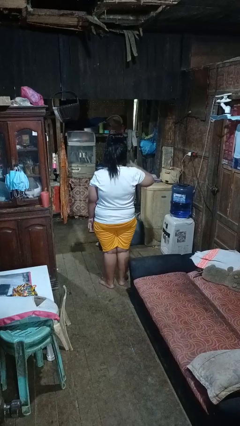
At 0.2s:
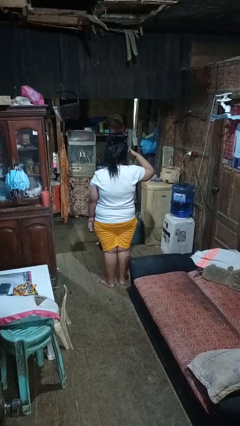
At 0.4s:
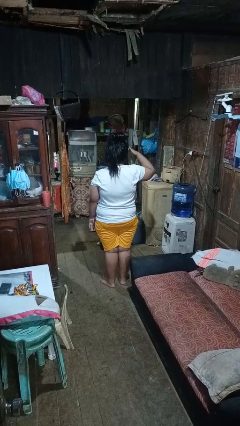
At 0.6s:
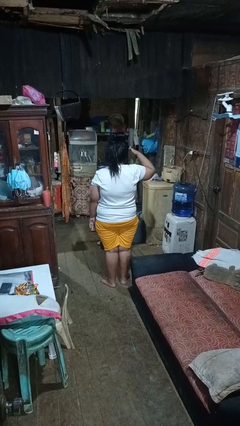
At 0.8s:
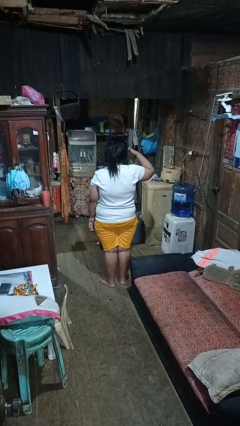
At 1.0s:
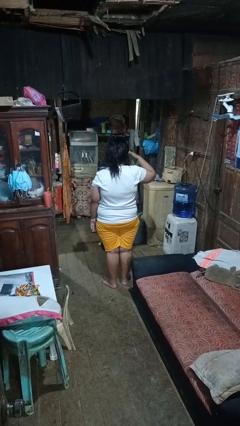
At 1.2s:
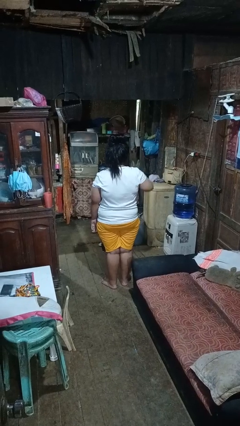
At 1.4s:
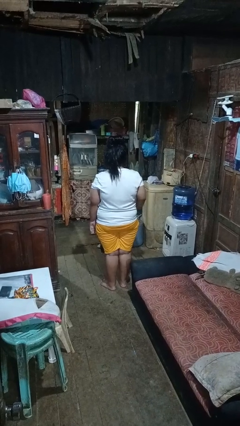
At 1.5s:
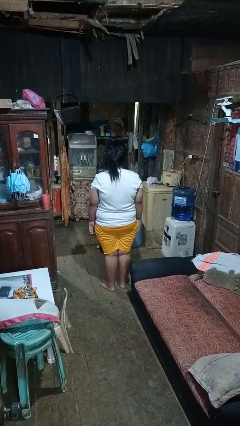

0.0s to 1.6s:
person salutes

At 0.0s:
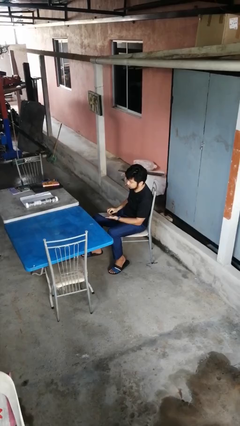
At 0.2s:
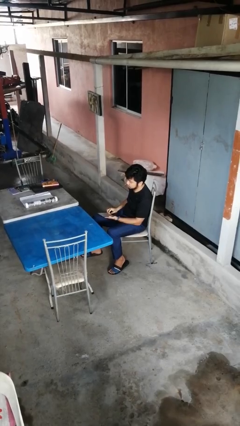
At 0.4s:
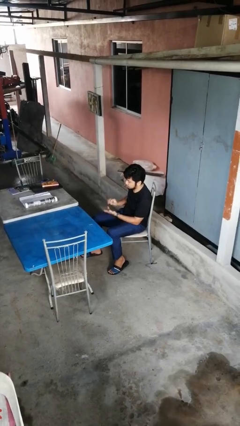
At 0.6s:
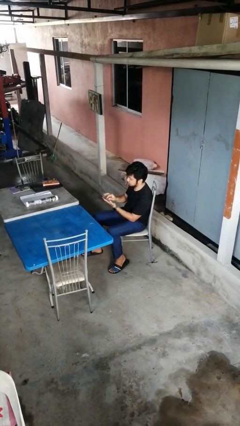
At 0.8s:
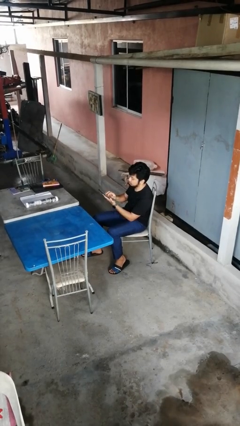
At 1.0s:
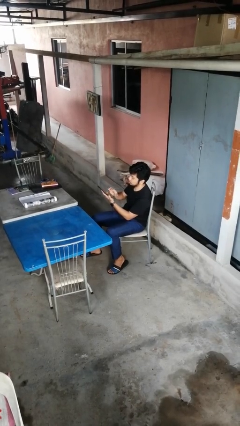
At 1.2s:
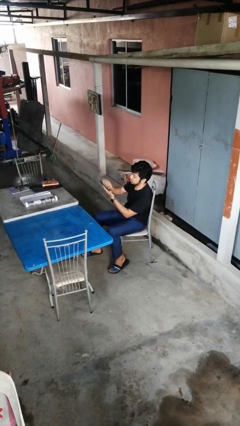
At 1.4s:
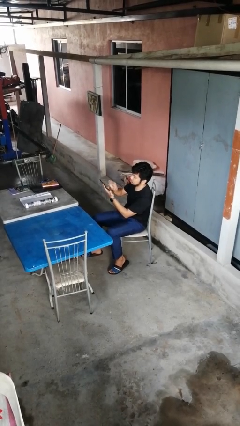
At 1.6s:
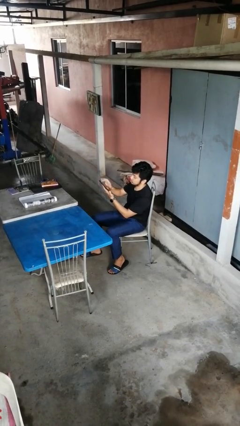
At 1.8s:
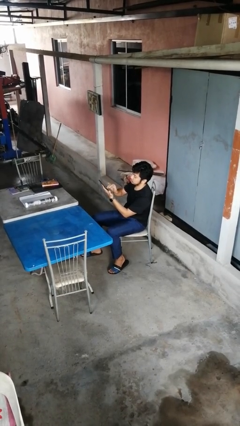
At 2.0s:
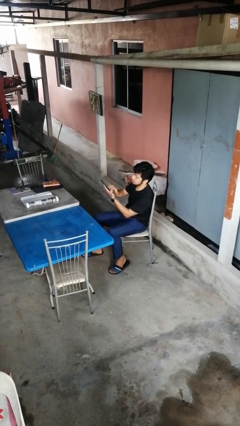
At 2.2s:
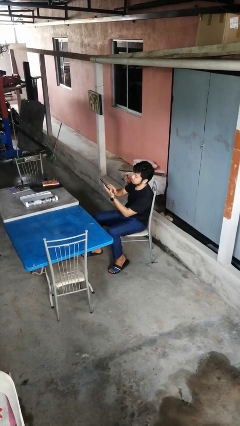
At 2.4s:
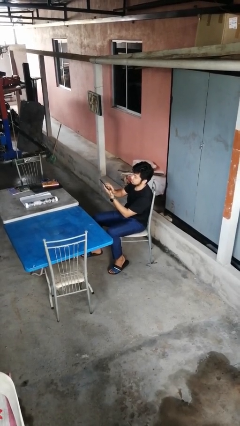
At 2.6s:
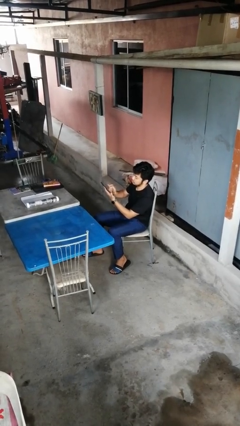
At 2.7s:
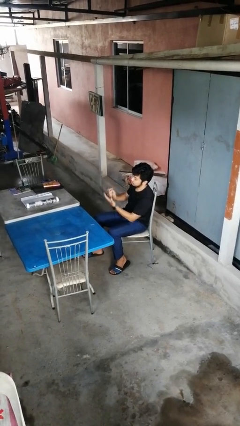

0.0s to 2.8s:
person interacts with tablet

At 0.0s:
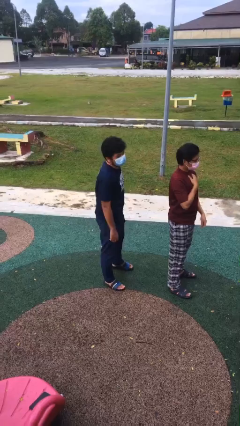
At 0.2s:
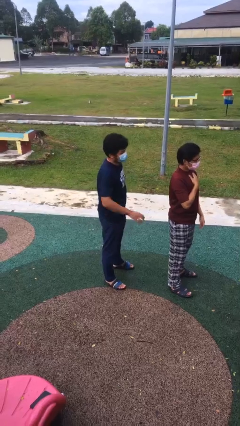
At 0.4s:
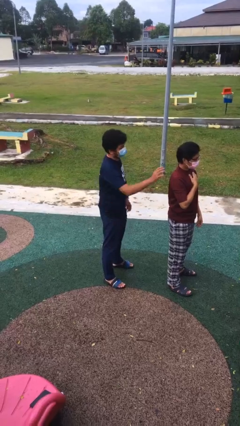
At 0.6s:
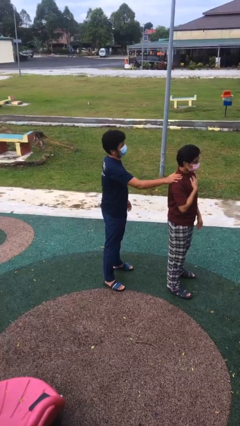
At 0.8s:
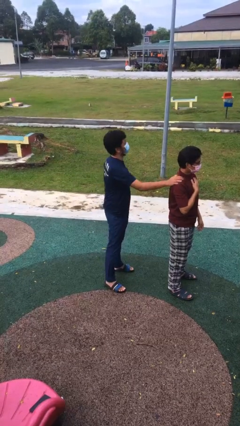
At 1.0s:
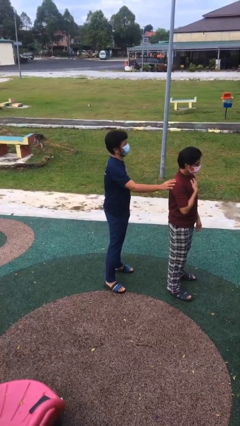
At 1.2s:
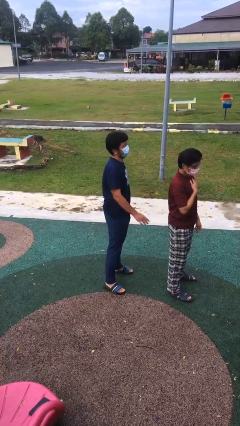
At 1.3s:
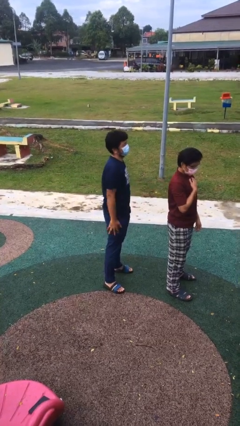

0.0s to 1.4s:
person touches back of person

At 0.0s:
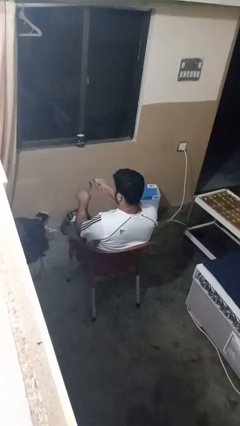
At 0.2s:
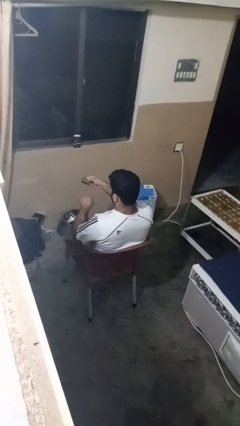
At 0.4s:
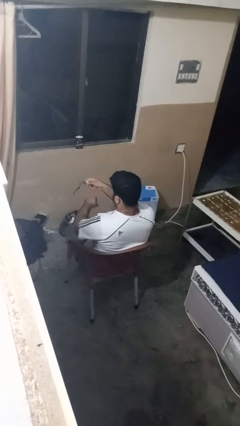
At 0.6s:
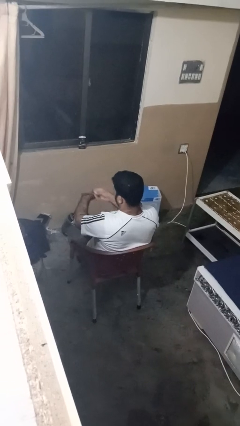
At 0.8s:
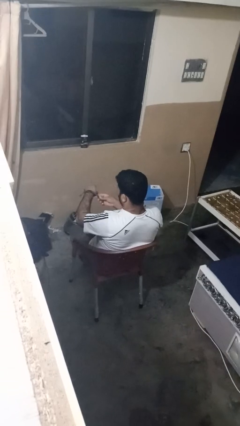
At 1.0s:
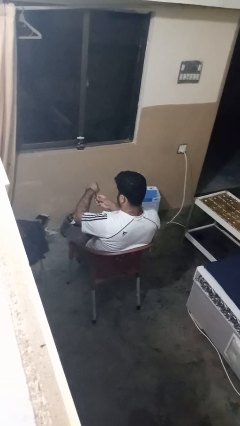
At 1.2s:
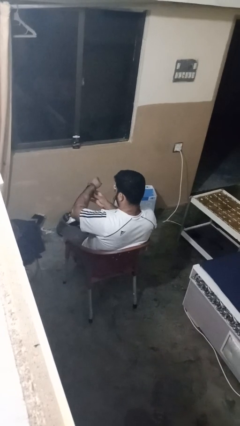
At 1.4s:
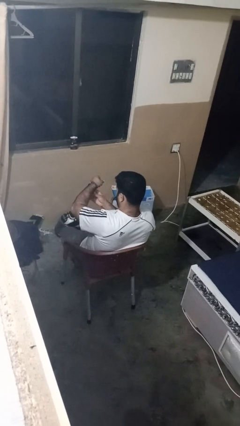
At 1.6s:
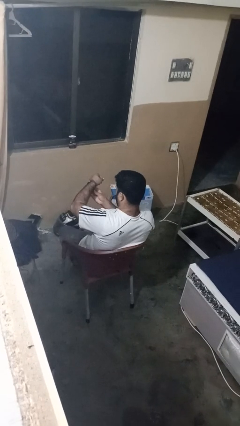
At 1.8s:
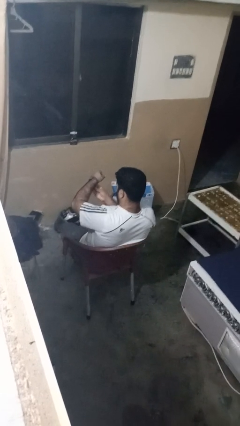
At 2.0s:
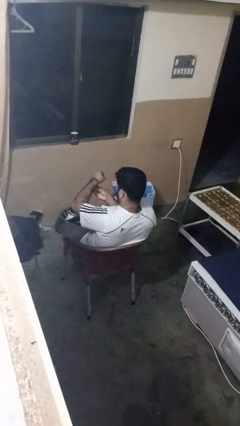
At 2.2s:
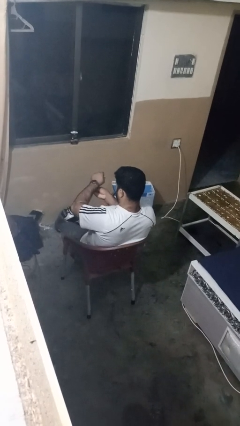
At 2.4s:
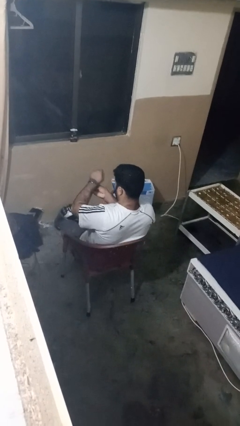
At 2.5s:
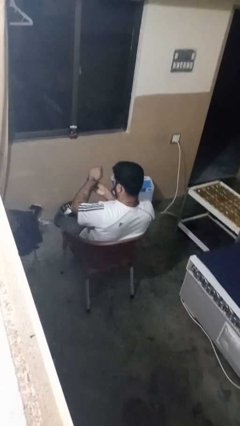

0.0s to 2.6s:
person puts on wristwatch

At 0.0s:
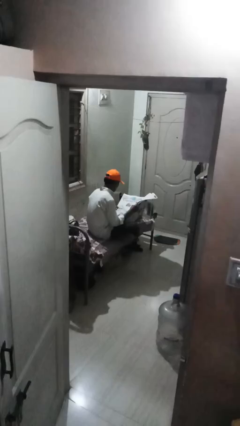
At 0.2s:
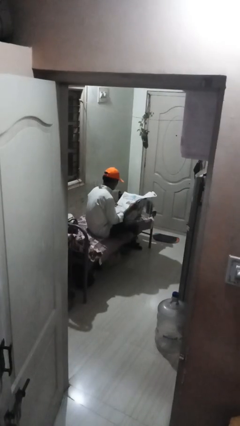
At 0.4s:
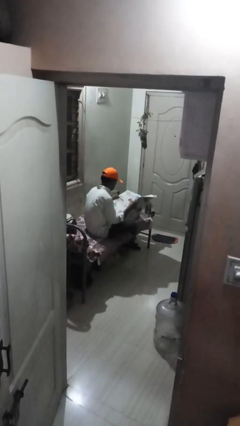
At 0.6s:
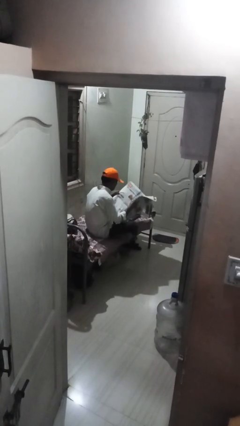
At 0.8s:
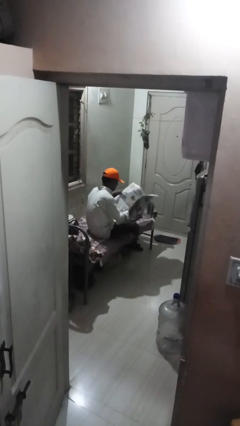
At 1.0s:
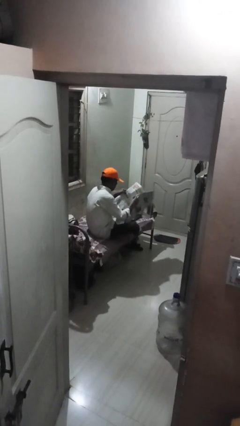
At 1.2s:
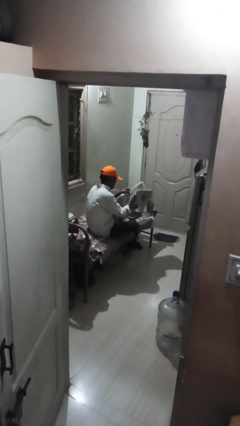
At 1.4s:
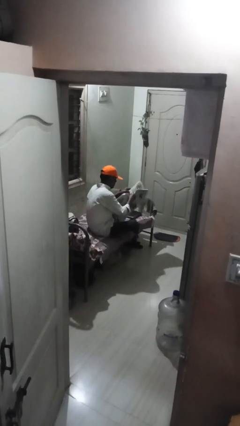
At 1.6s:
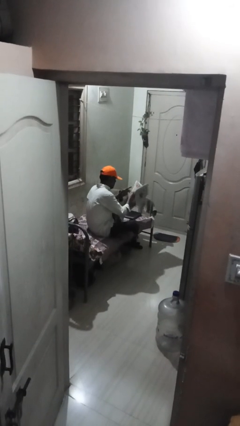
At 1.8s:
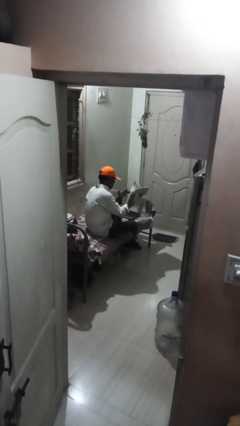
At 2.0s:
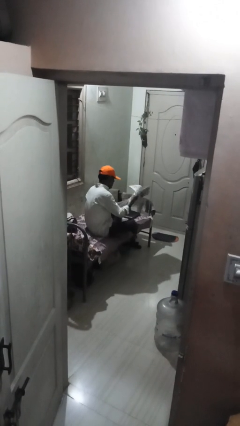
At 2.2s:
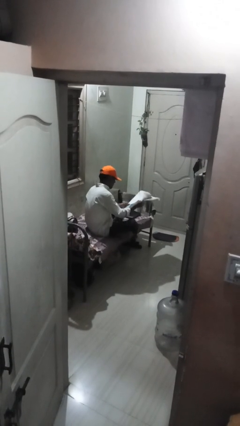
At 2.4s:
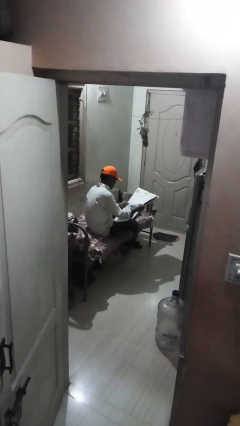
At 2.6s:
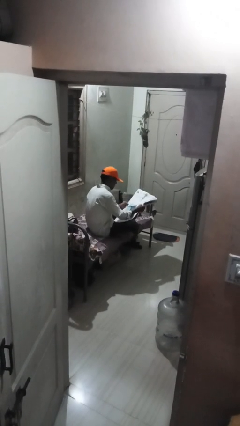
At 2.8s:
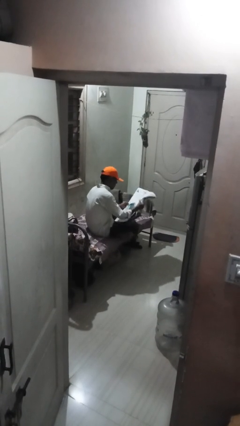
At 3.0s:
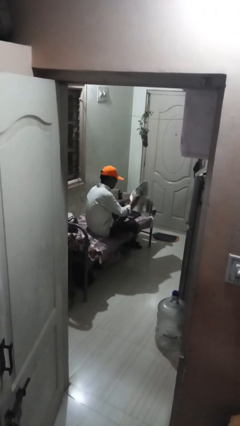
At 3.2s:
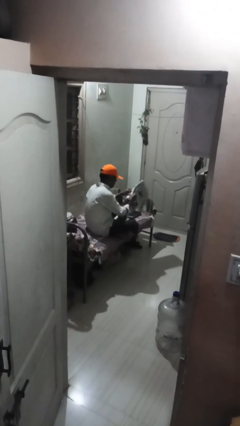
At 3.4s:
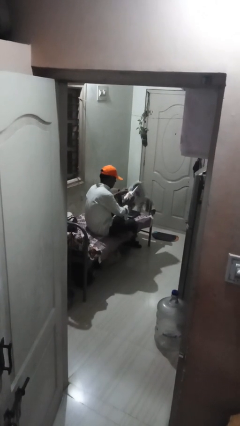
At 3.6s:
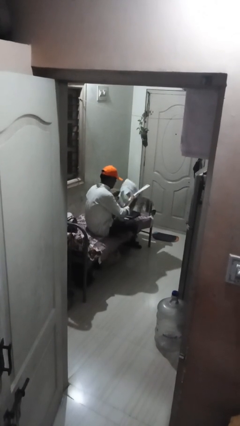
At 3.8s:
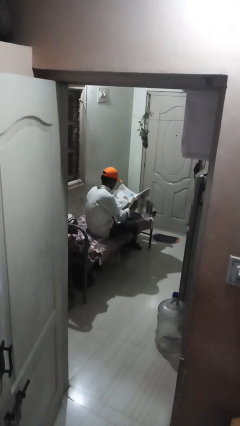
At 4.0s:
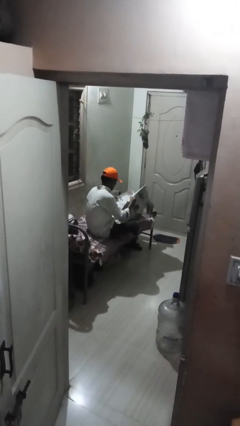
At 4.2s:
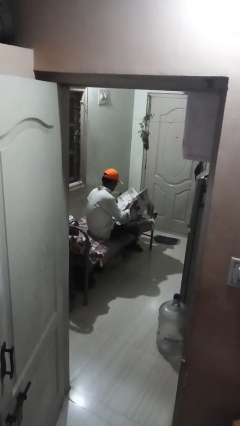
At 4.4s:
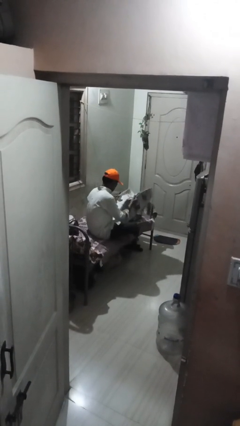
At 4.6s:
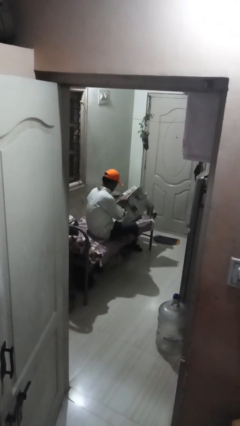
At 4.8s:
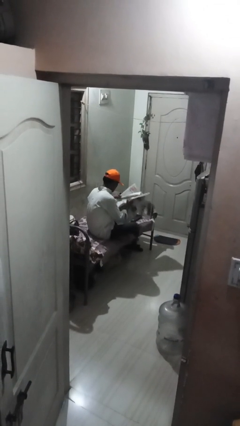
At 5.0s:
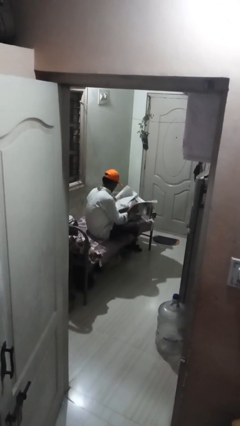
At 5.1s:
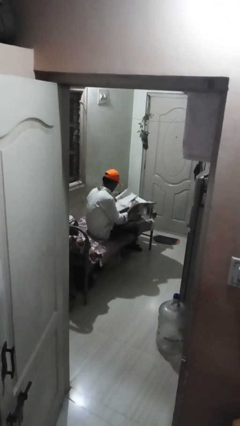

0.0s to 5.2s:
person reads newspaper

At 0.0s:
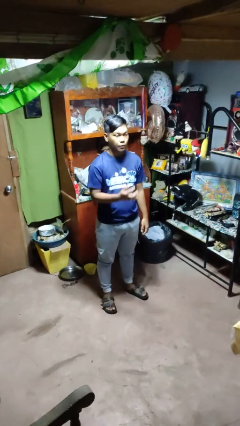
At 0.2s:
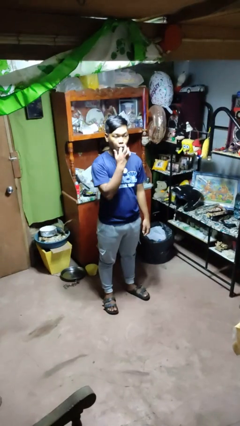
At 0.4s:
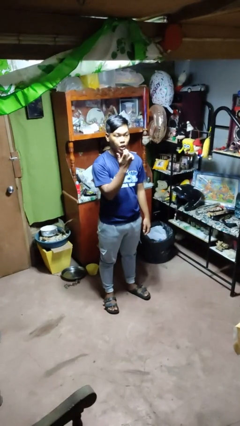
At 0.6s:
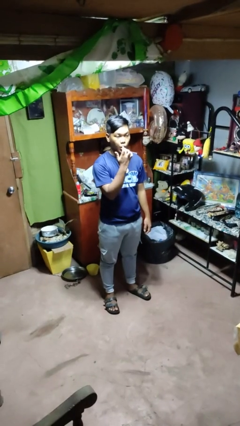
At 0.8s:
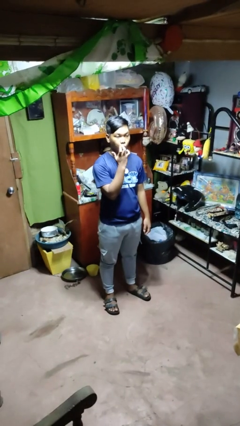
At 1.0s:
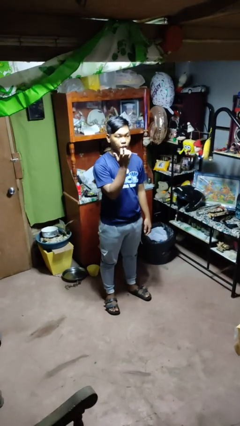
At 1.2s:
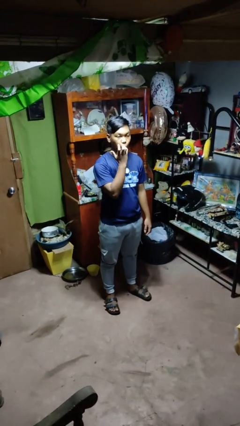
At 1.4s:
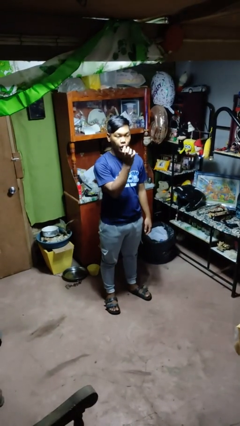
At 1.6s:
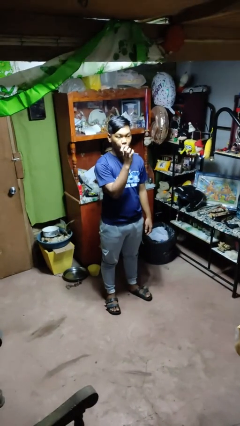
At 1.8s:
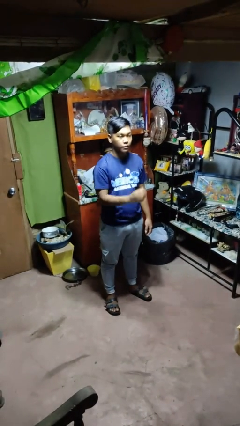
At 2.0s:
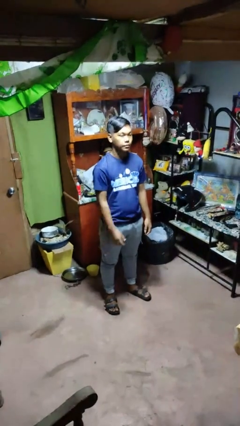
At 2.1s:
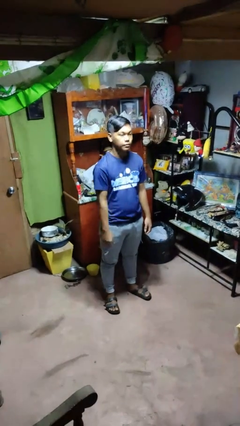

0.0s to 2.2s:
person licks fingers

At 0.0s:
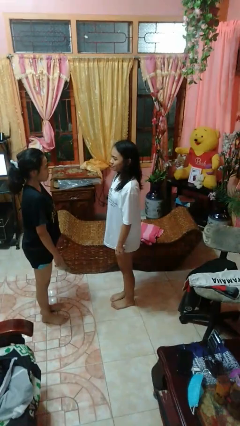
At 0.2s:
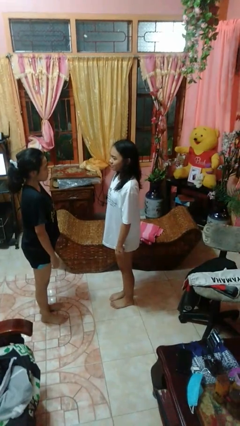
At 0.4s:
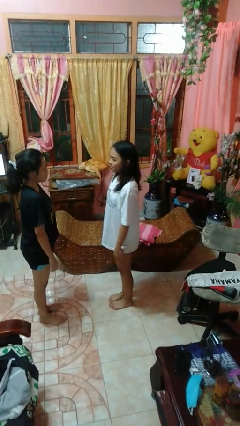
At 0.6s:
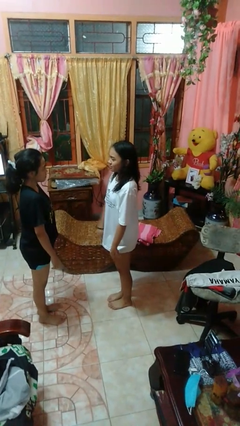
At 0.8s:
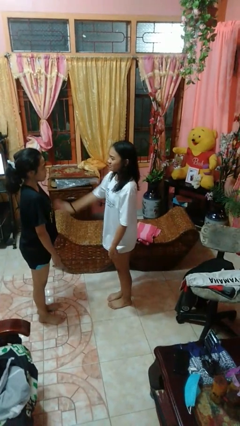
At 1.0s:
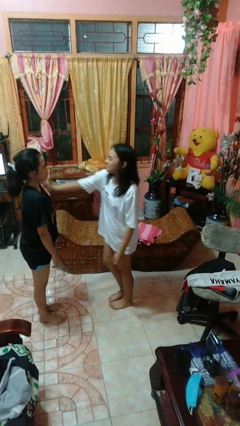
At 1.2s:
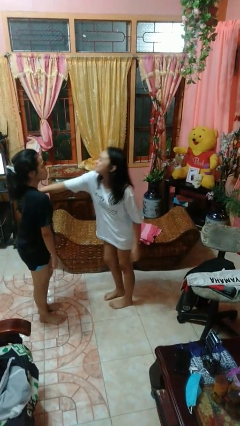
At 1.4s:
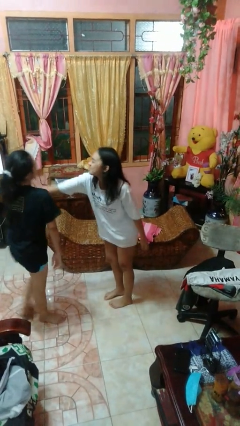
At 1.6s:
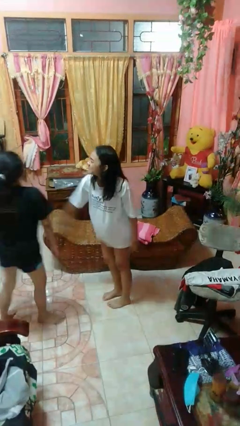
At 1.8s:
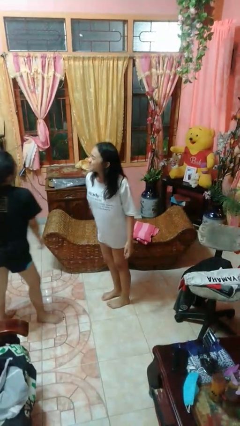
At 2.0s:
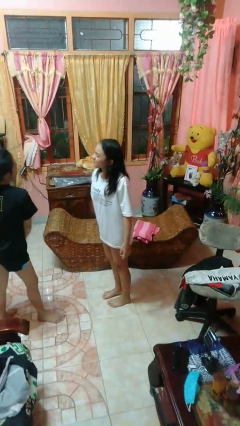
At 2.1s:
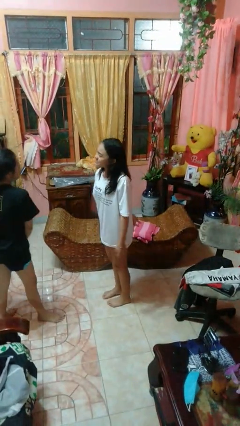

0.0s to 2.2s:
person shoves person
